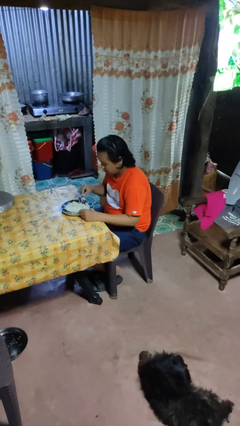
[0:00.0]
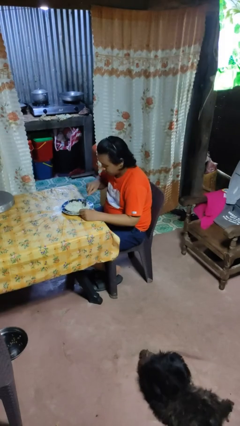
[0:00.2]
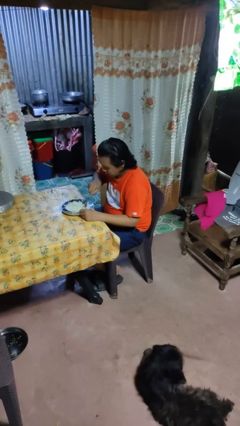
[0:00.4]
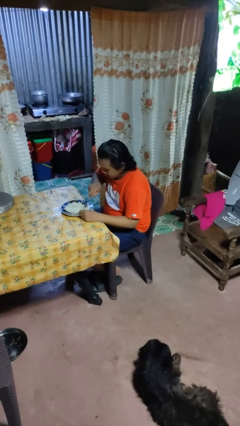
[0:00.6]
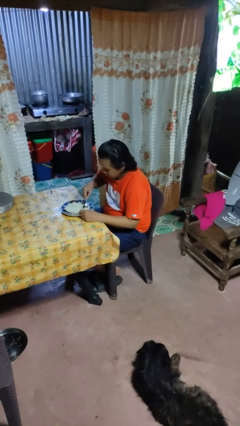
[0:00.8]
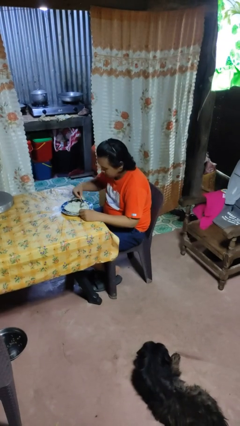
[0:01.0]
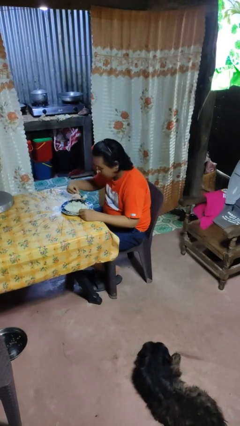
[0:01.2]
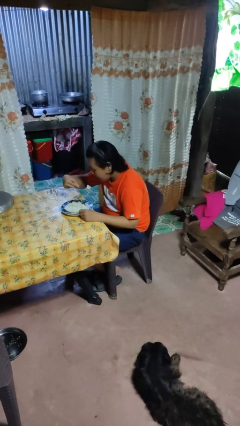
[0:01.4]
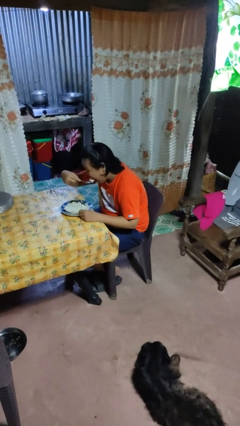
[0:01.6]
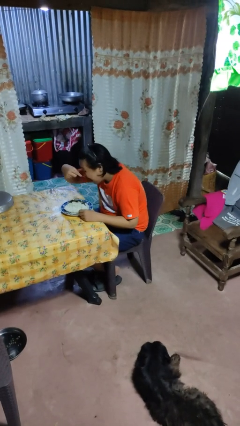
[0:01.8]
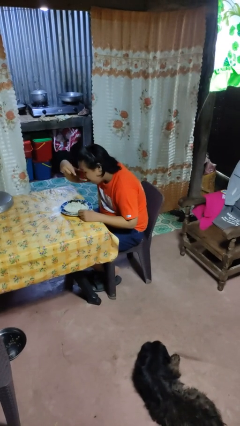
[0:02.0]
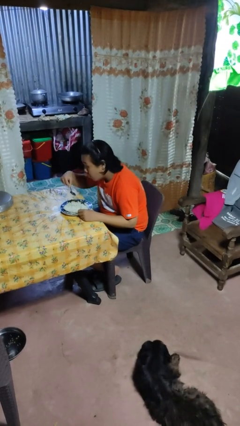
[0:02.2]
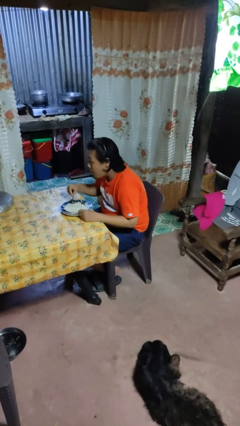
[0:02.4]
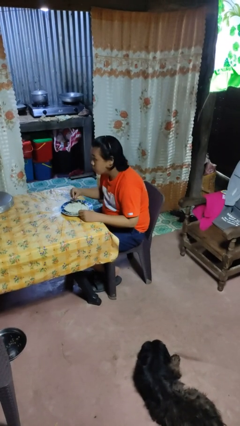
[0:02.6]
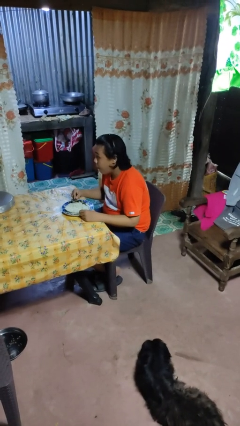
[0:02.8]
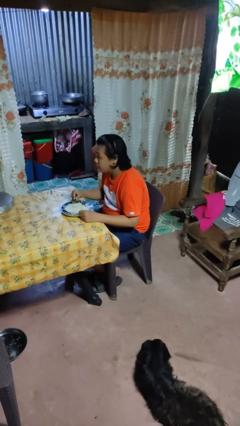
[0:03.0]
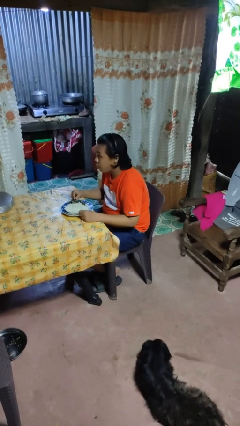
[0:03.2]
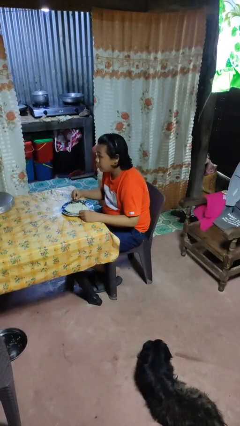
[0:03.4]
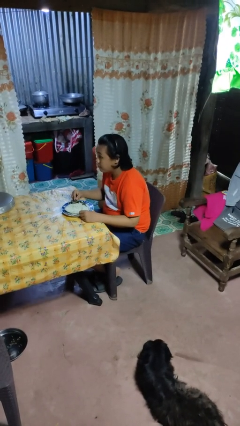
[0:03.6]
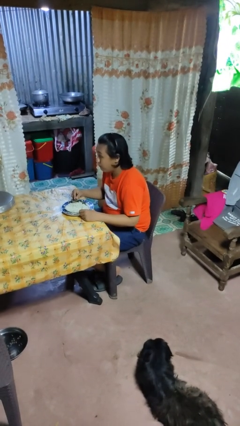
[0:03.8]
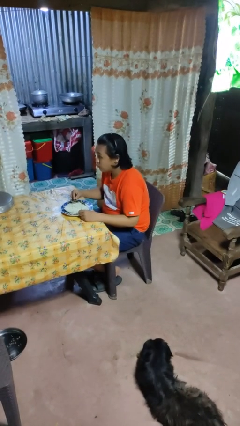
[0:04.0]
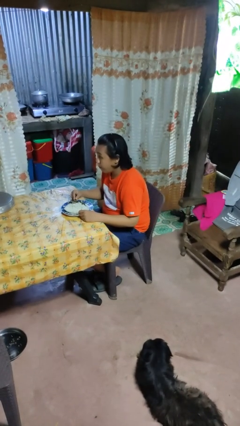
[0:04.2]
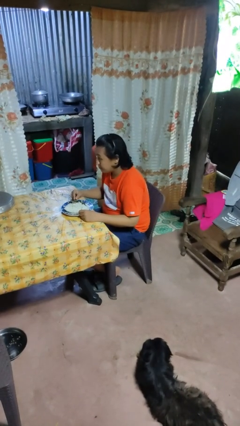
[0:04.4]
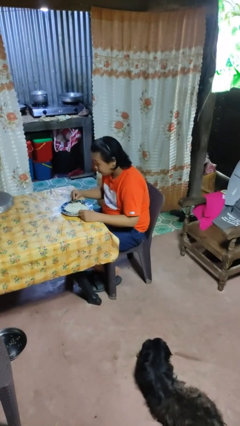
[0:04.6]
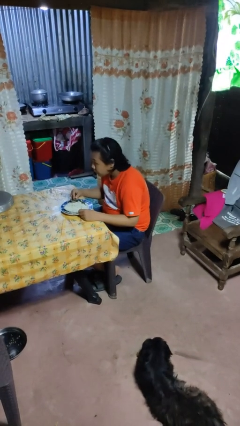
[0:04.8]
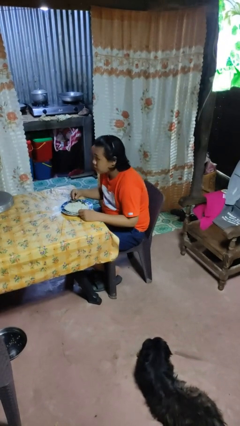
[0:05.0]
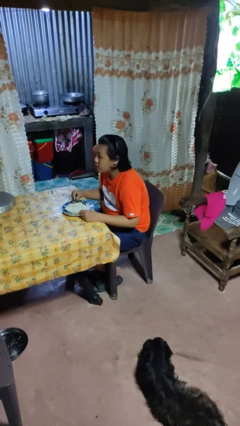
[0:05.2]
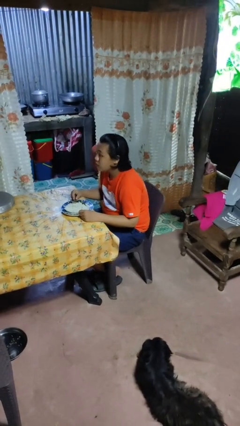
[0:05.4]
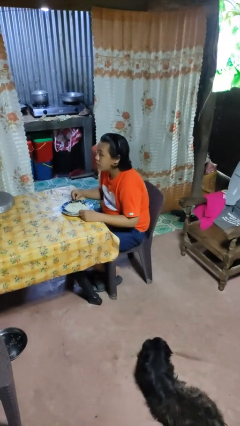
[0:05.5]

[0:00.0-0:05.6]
person eats with utensil

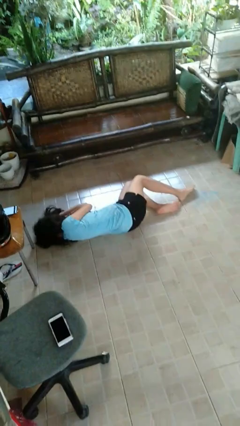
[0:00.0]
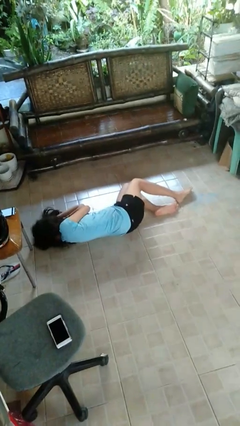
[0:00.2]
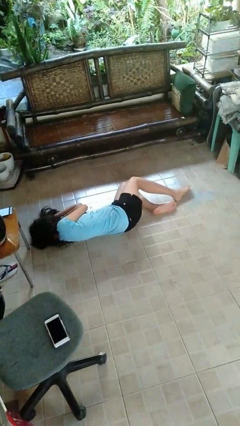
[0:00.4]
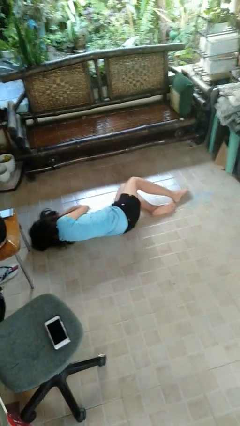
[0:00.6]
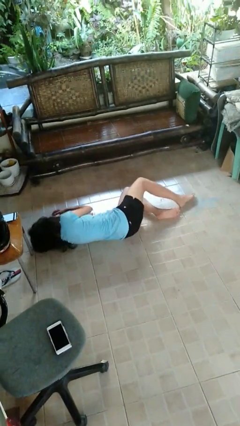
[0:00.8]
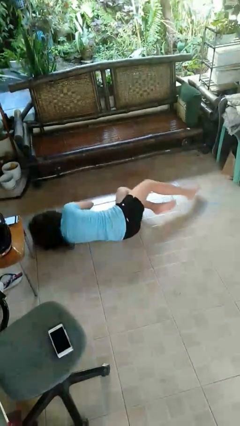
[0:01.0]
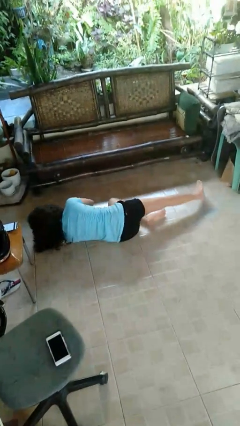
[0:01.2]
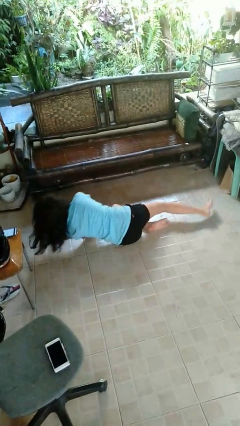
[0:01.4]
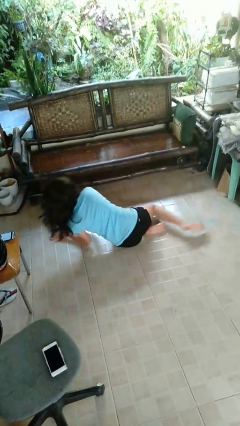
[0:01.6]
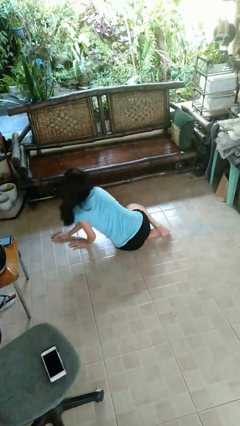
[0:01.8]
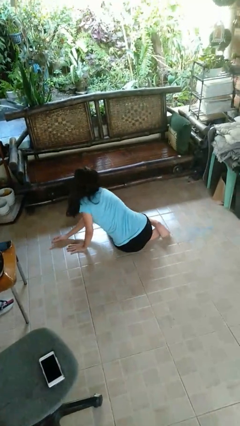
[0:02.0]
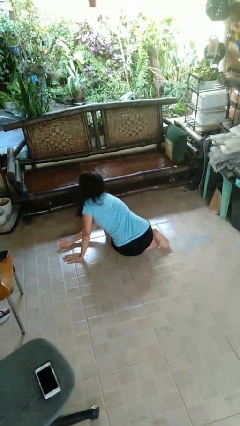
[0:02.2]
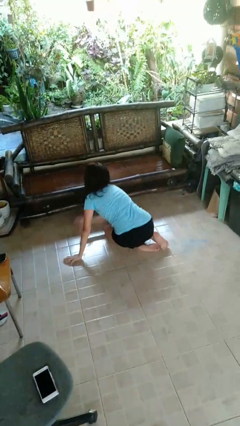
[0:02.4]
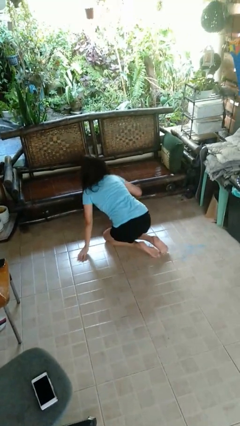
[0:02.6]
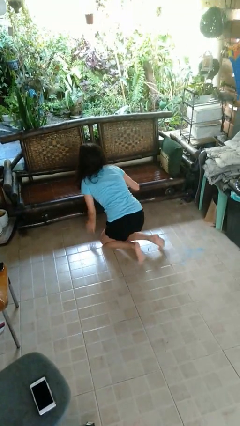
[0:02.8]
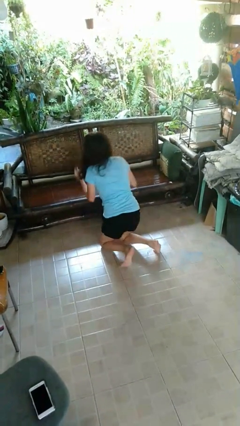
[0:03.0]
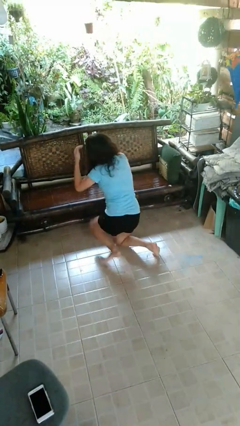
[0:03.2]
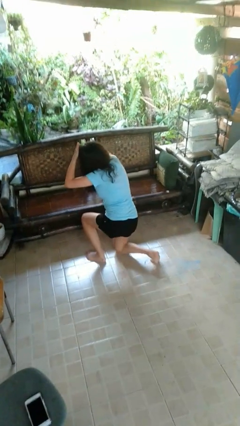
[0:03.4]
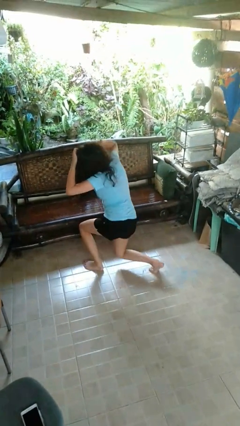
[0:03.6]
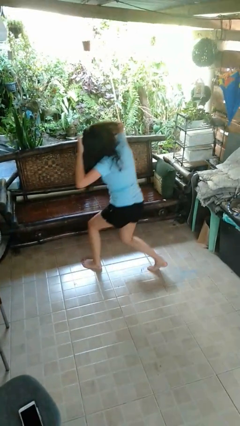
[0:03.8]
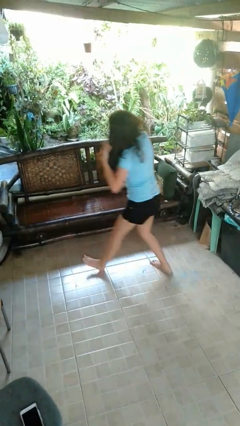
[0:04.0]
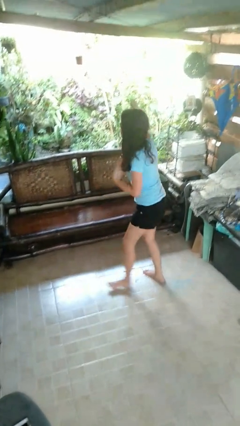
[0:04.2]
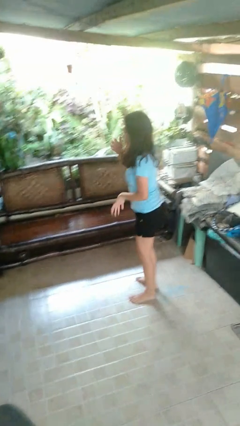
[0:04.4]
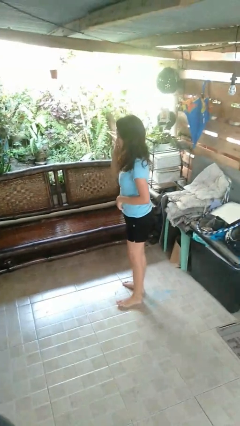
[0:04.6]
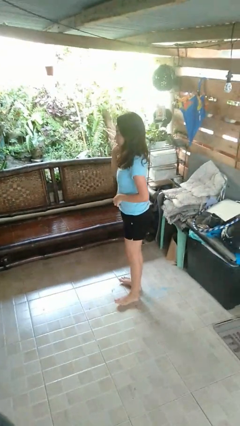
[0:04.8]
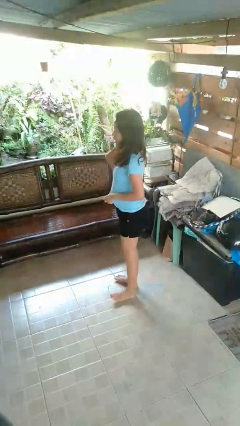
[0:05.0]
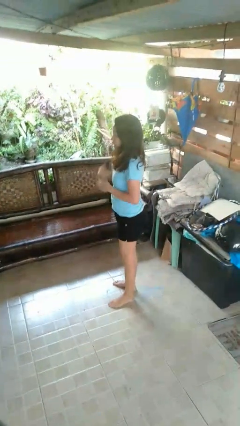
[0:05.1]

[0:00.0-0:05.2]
person stands up from floor

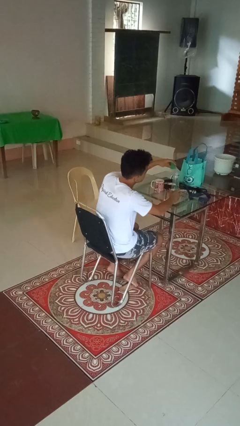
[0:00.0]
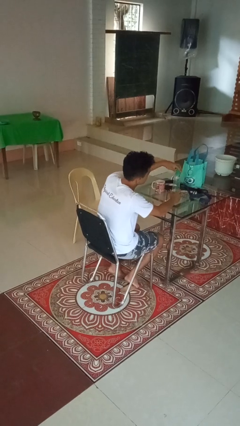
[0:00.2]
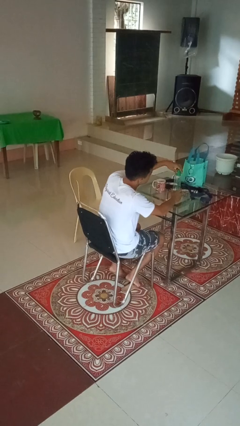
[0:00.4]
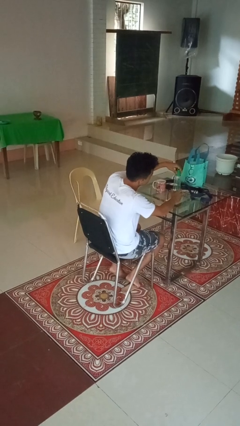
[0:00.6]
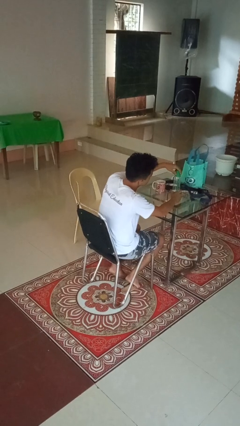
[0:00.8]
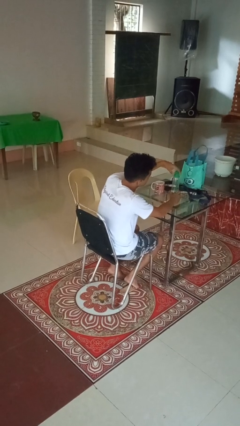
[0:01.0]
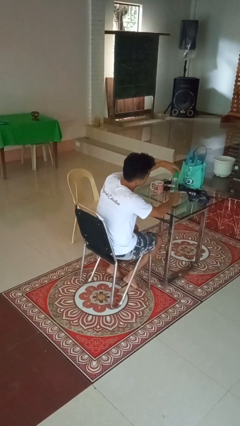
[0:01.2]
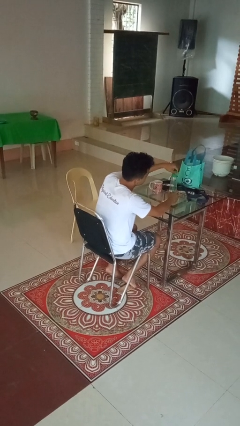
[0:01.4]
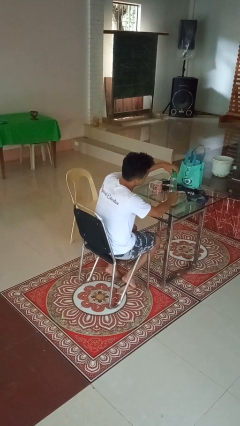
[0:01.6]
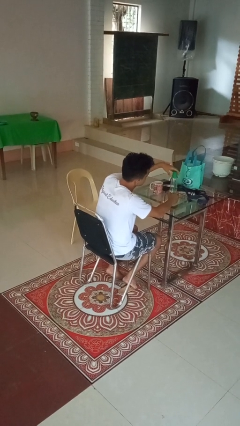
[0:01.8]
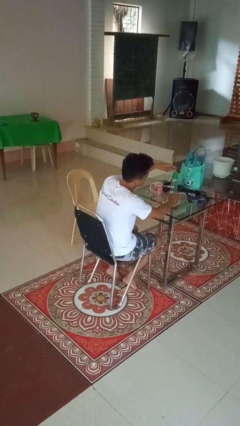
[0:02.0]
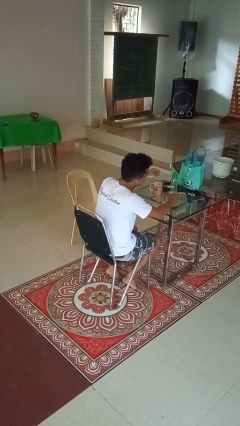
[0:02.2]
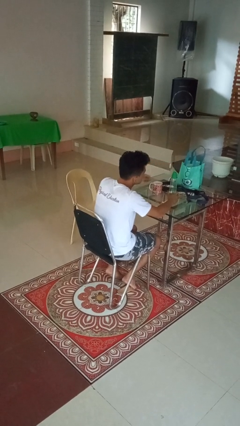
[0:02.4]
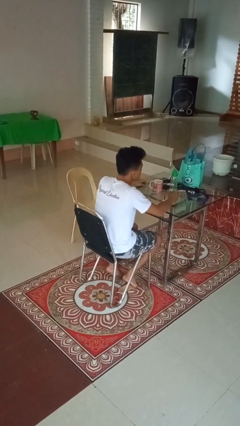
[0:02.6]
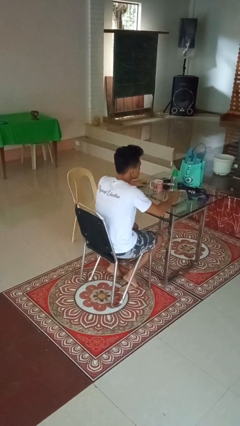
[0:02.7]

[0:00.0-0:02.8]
person screws lid to bottle

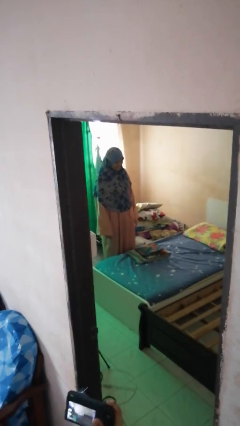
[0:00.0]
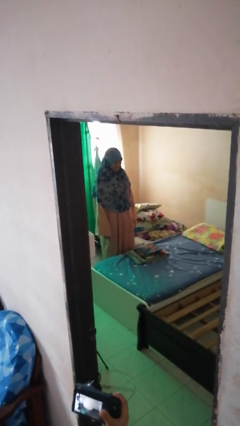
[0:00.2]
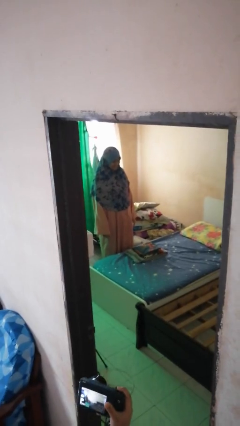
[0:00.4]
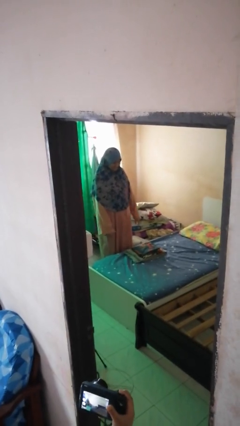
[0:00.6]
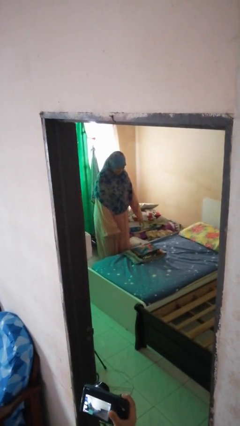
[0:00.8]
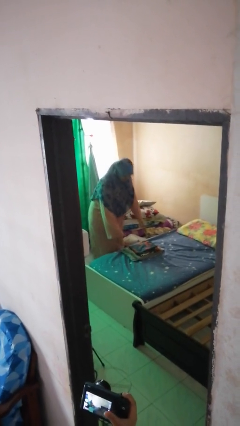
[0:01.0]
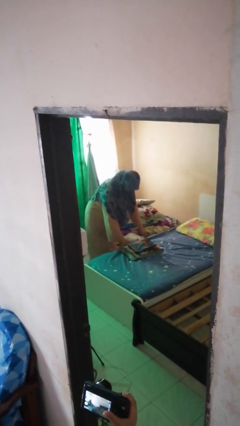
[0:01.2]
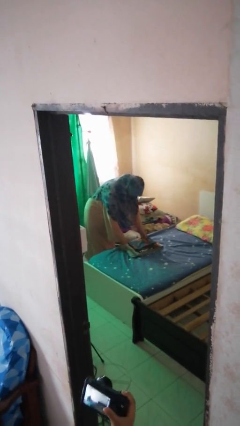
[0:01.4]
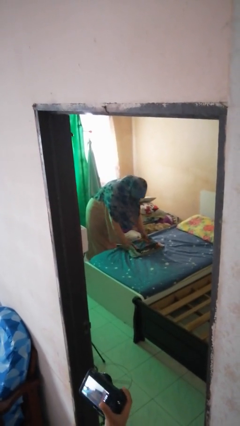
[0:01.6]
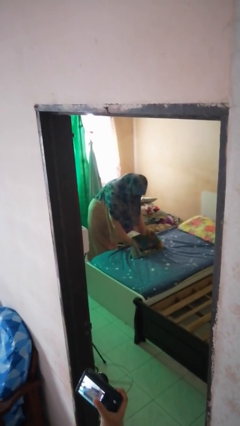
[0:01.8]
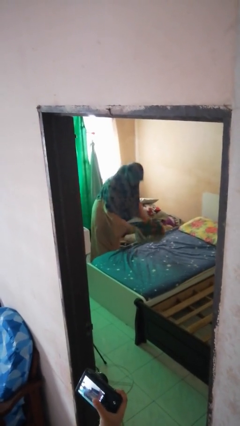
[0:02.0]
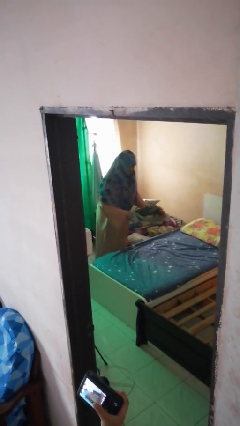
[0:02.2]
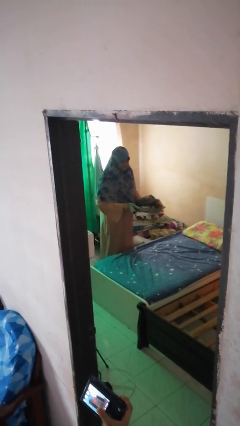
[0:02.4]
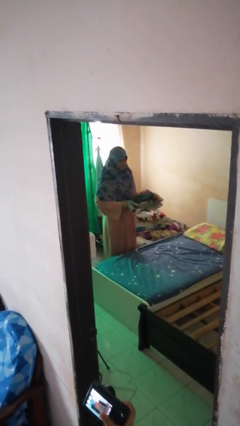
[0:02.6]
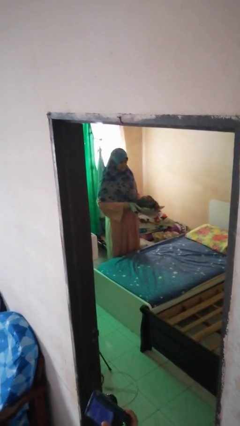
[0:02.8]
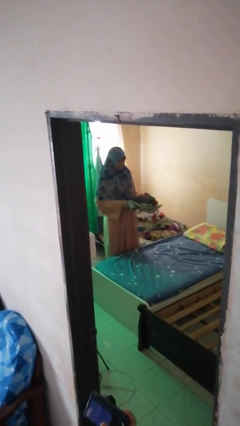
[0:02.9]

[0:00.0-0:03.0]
person picks up object from bed

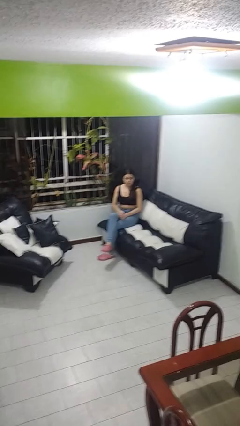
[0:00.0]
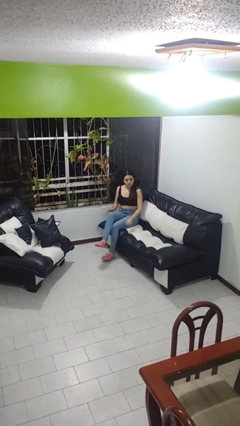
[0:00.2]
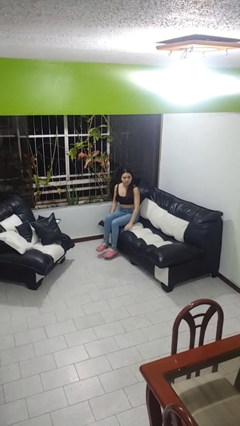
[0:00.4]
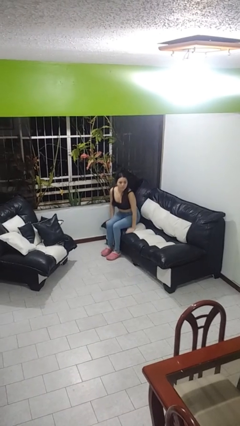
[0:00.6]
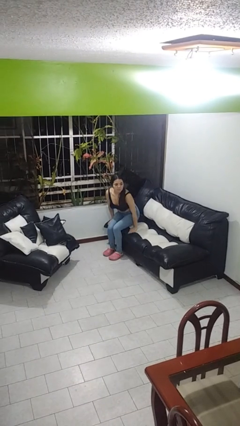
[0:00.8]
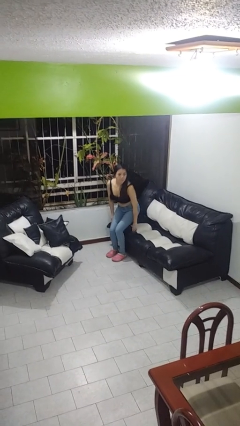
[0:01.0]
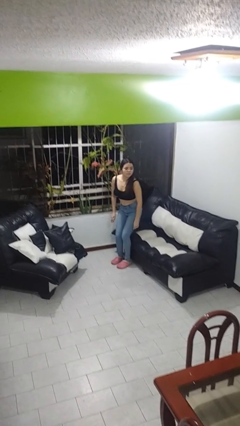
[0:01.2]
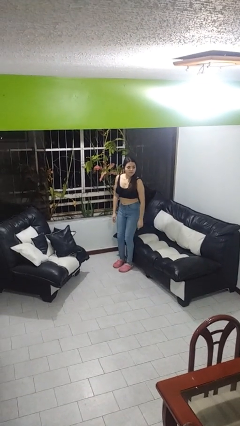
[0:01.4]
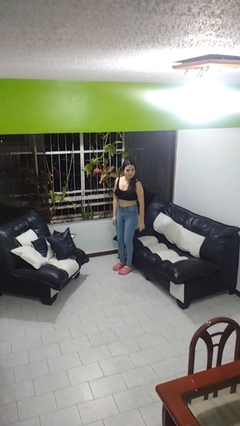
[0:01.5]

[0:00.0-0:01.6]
person stands up
